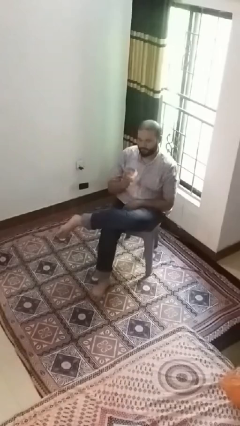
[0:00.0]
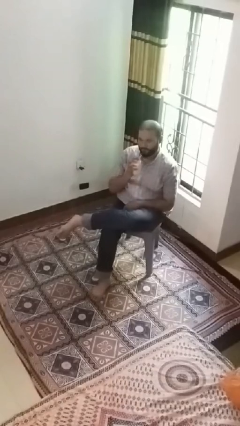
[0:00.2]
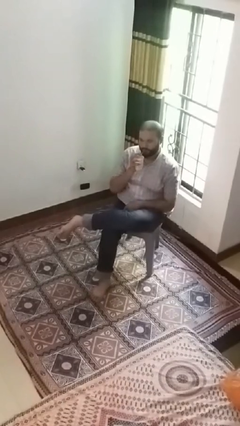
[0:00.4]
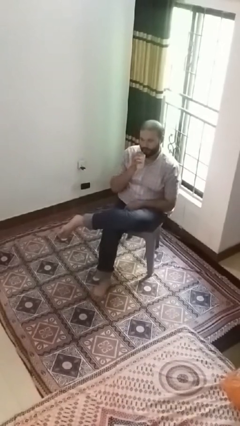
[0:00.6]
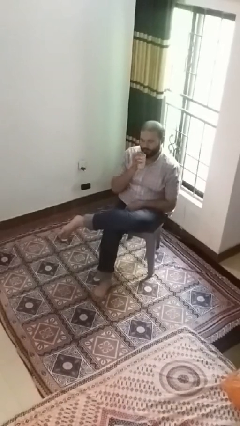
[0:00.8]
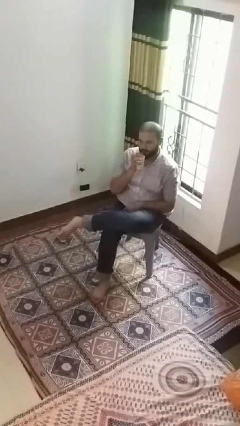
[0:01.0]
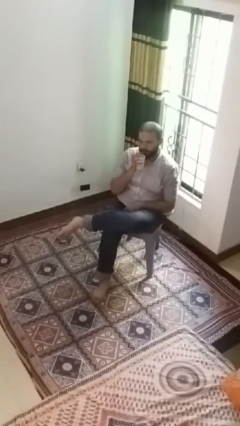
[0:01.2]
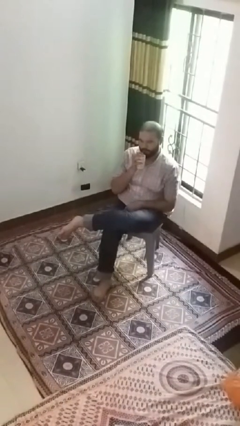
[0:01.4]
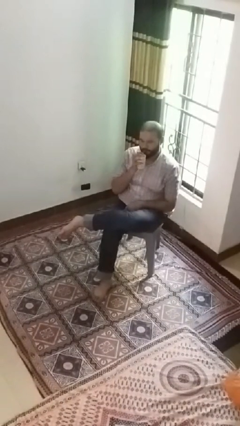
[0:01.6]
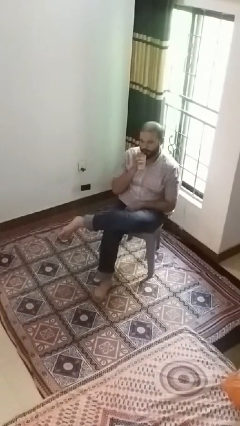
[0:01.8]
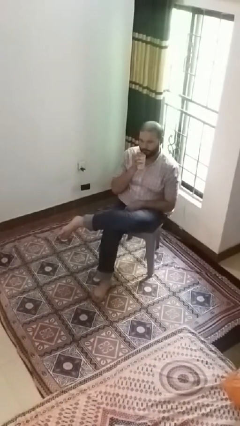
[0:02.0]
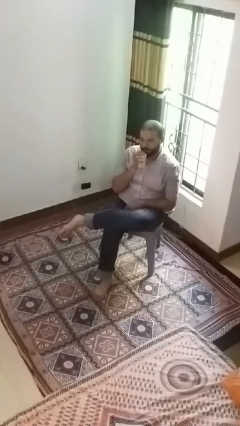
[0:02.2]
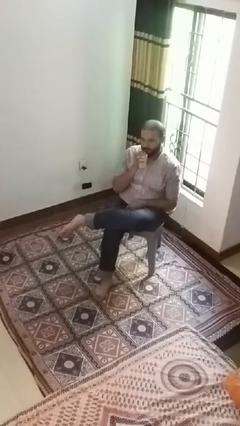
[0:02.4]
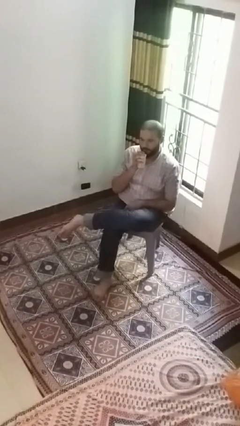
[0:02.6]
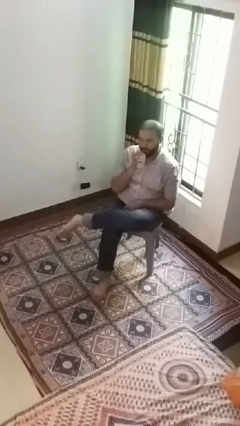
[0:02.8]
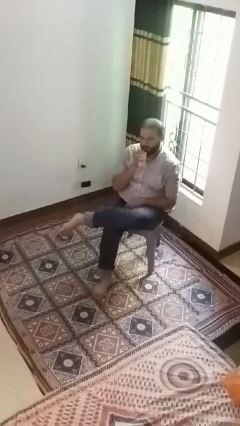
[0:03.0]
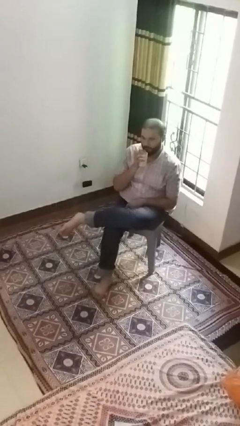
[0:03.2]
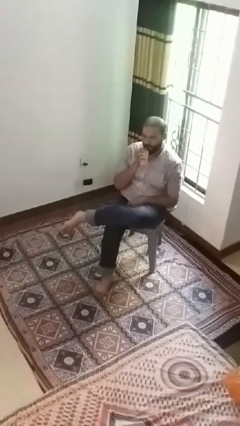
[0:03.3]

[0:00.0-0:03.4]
person drinks from straw

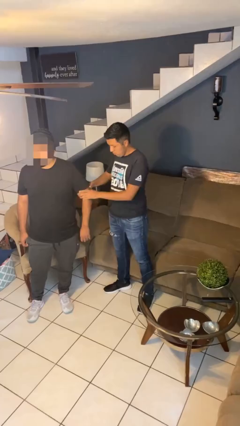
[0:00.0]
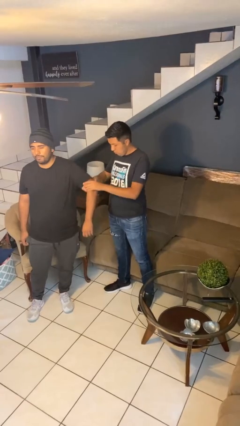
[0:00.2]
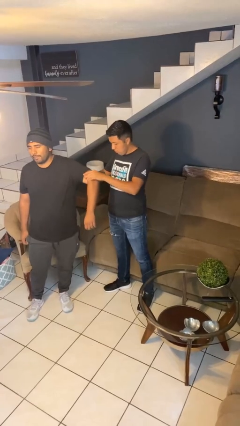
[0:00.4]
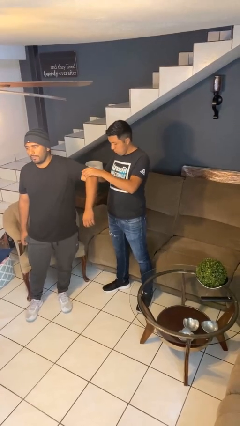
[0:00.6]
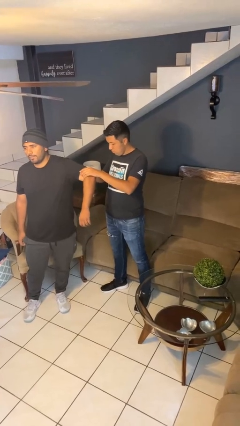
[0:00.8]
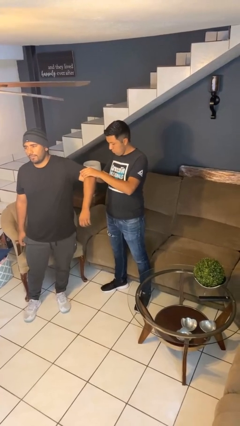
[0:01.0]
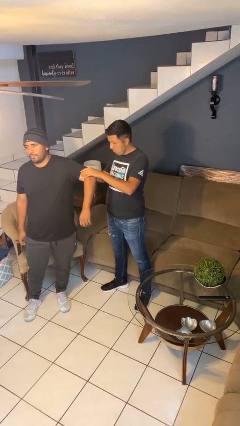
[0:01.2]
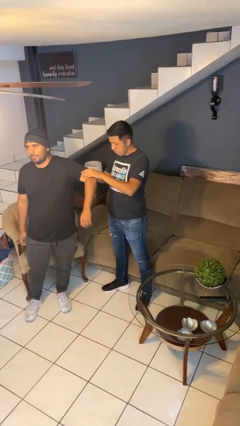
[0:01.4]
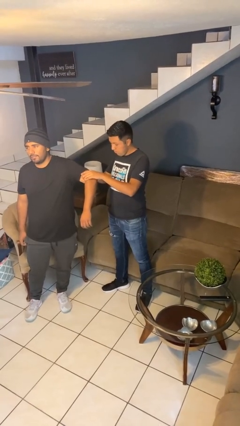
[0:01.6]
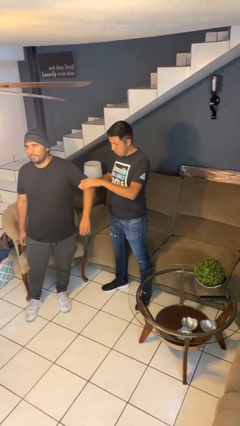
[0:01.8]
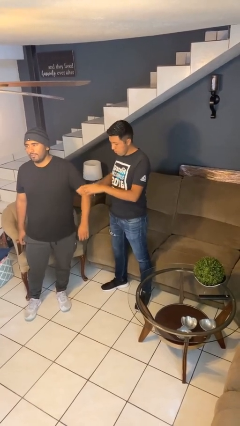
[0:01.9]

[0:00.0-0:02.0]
person grabs person by bicep

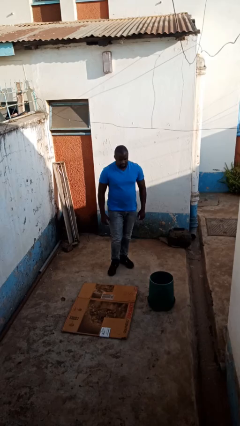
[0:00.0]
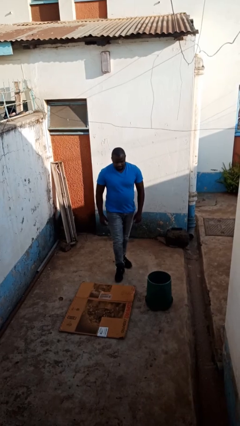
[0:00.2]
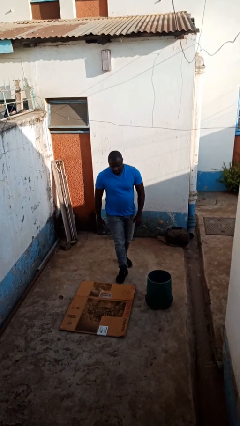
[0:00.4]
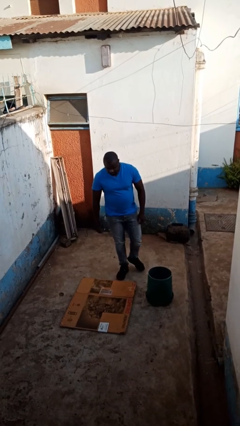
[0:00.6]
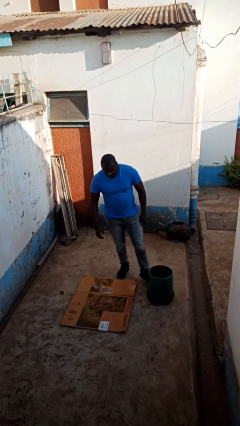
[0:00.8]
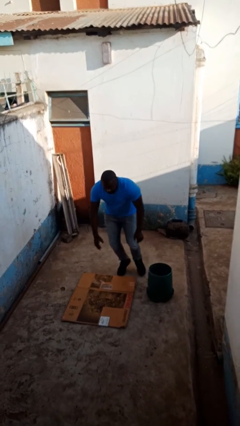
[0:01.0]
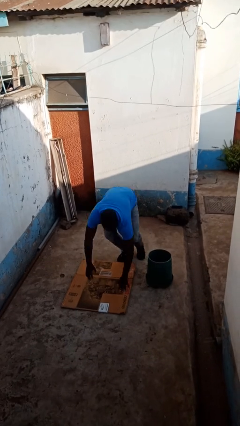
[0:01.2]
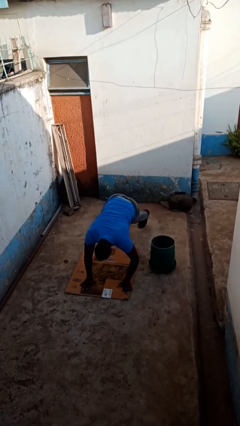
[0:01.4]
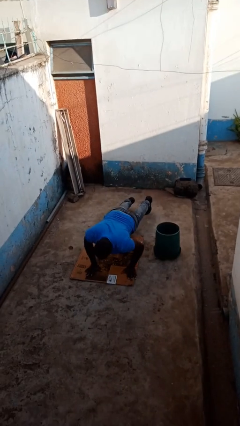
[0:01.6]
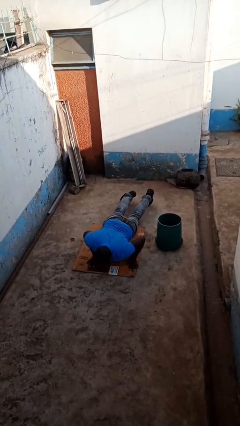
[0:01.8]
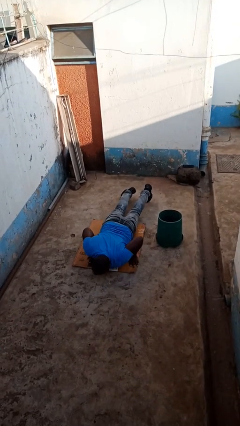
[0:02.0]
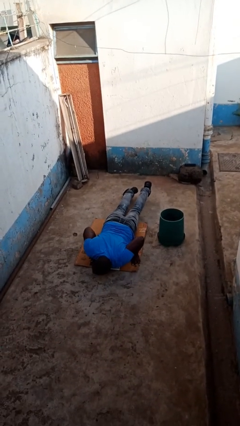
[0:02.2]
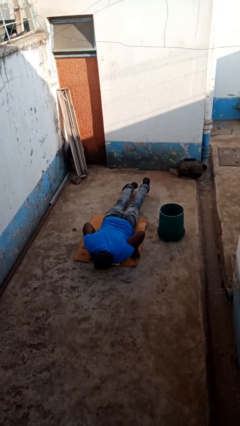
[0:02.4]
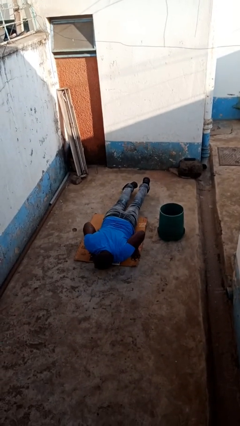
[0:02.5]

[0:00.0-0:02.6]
person trips on object on floor

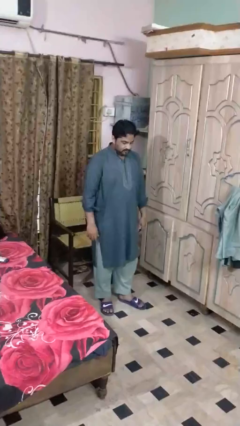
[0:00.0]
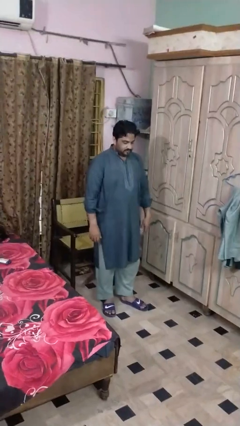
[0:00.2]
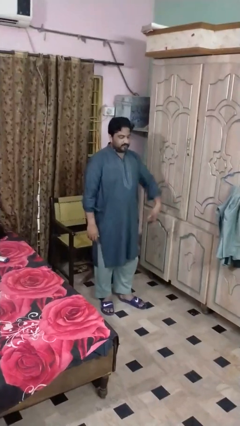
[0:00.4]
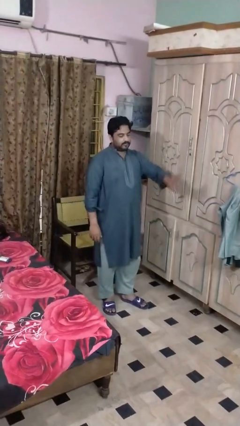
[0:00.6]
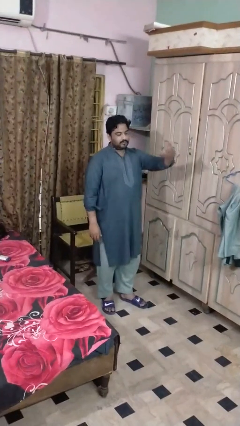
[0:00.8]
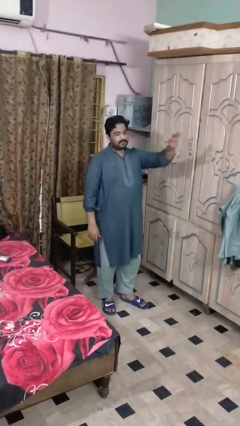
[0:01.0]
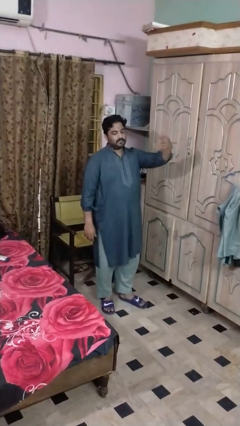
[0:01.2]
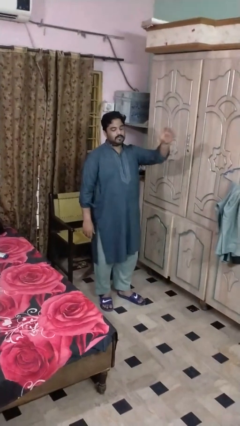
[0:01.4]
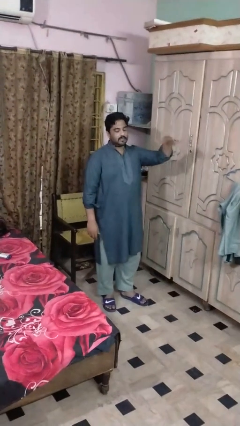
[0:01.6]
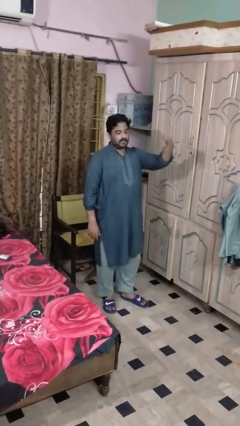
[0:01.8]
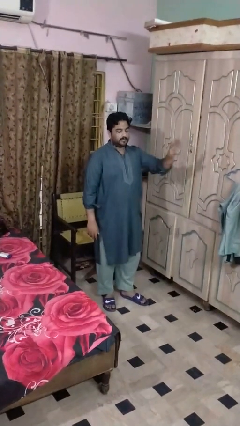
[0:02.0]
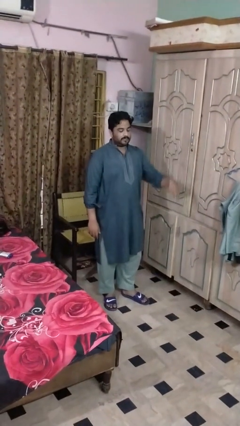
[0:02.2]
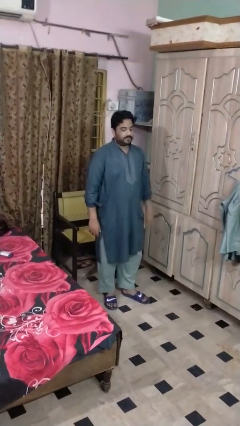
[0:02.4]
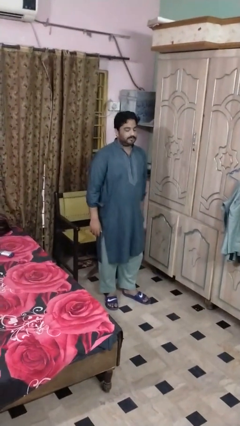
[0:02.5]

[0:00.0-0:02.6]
person shakes head

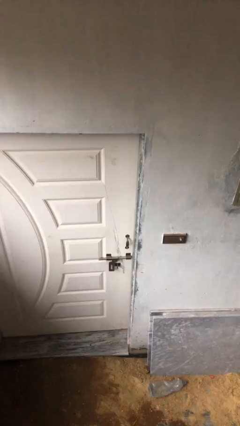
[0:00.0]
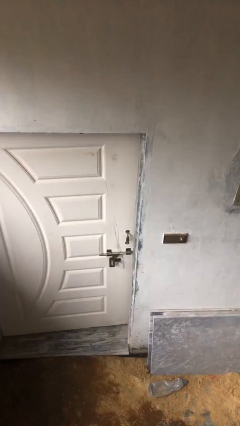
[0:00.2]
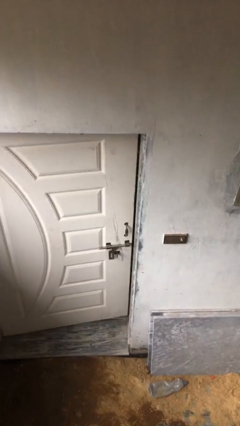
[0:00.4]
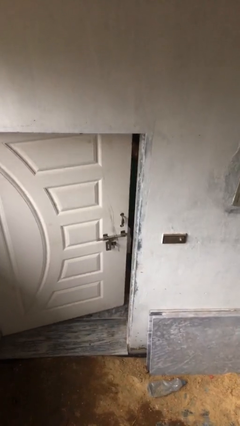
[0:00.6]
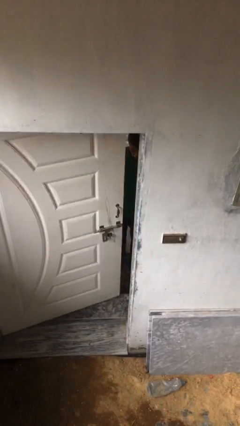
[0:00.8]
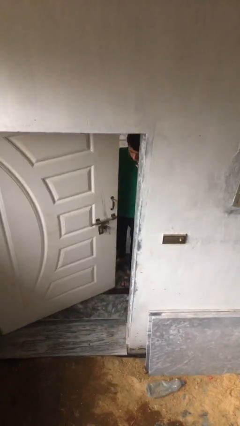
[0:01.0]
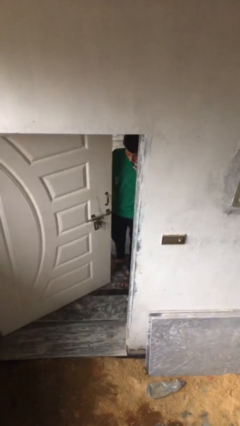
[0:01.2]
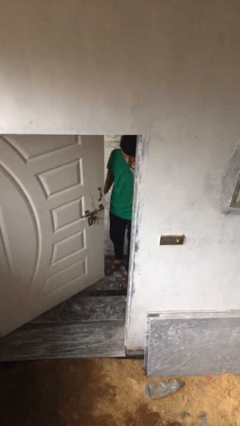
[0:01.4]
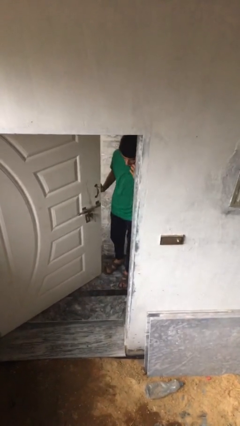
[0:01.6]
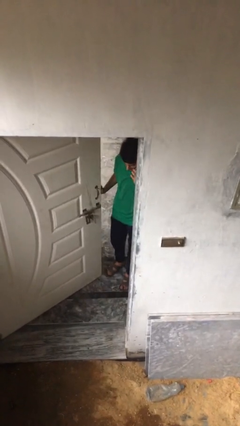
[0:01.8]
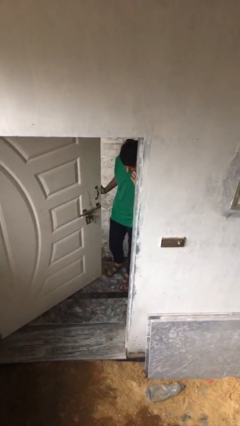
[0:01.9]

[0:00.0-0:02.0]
person opens facility door

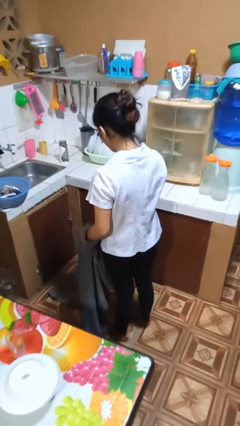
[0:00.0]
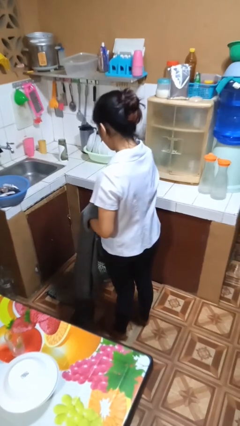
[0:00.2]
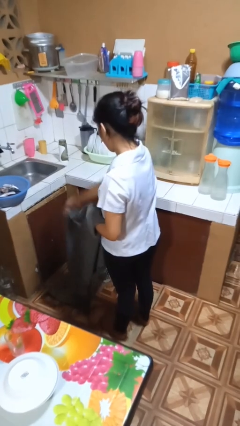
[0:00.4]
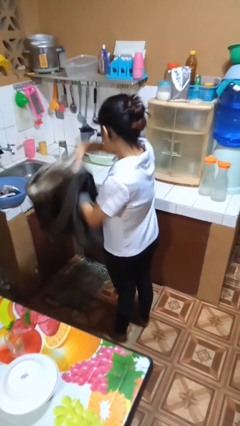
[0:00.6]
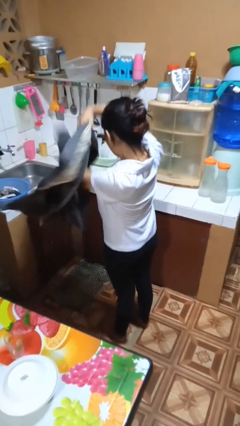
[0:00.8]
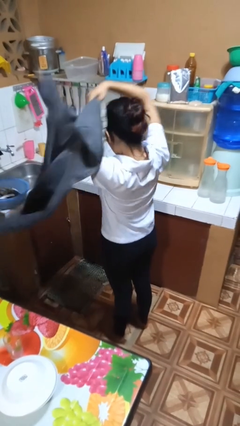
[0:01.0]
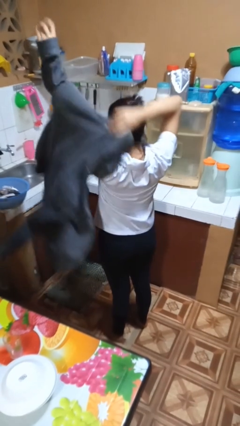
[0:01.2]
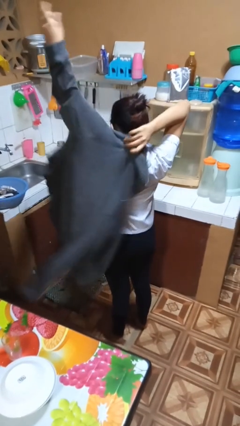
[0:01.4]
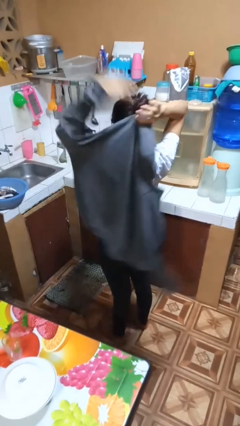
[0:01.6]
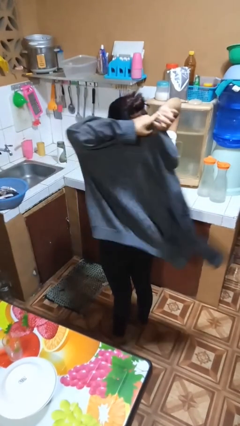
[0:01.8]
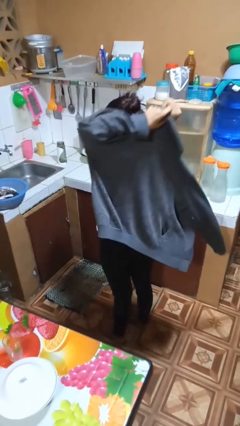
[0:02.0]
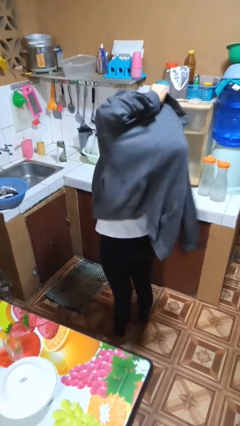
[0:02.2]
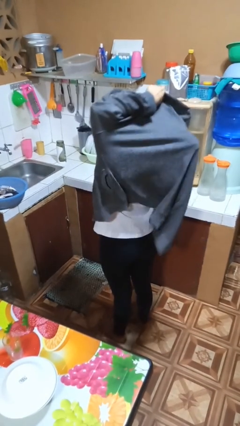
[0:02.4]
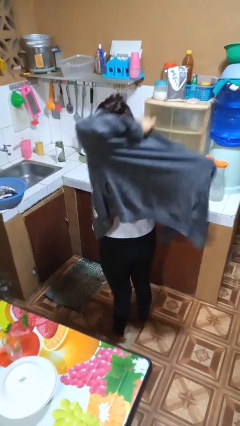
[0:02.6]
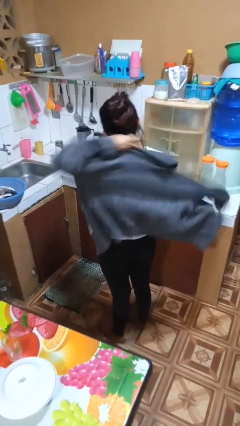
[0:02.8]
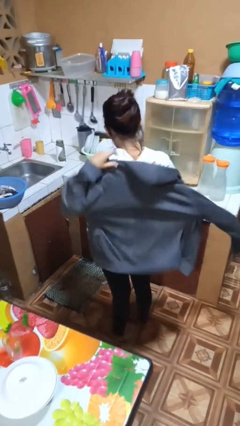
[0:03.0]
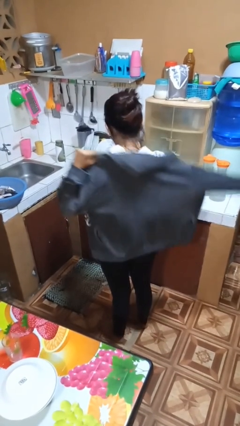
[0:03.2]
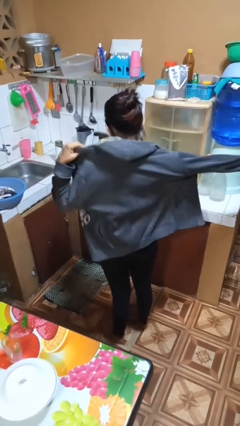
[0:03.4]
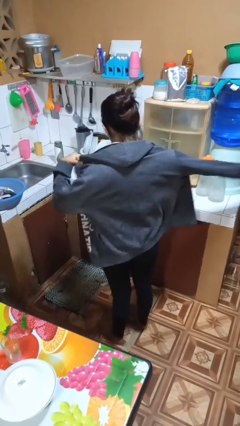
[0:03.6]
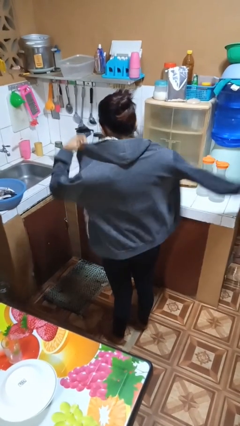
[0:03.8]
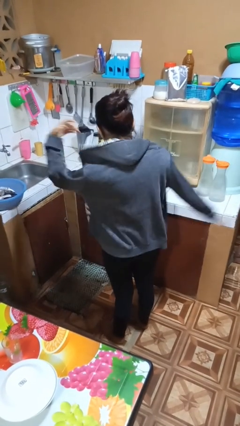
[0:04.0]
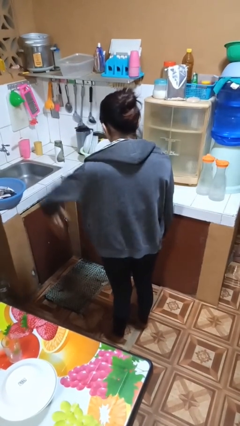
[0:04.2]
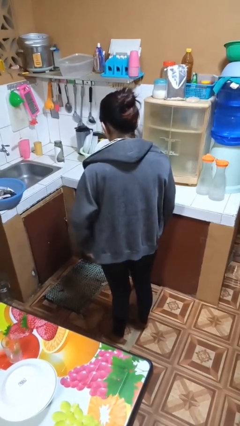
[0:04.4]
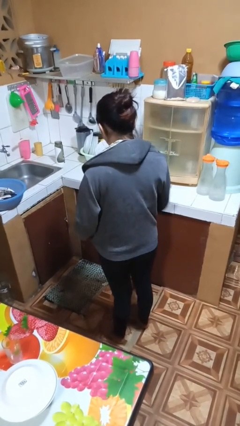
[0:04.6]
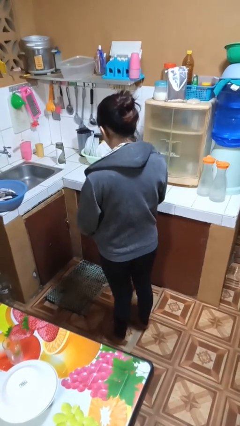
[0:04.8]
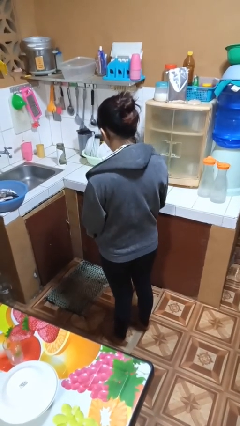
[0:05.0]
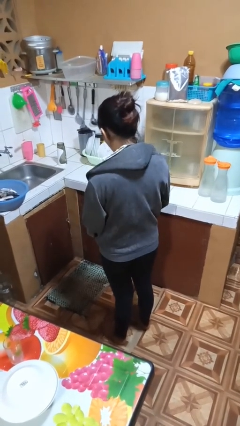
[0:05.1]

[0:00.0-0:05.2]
person puts on jacket
